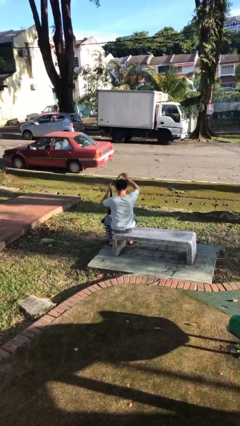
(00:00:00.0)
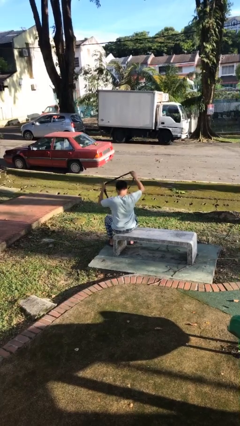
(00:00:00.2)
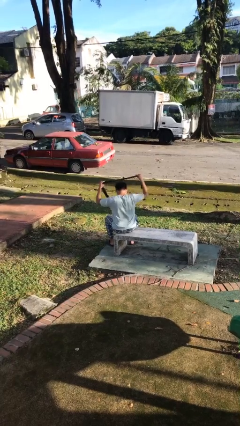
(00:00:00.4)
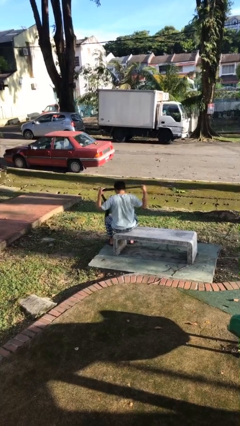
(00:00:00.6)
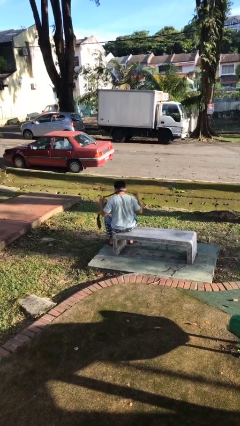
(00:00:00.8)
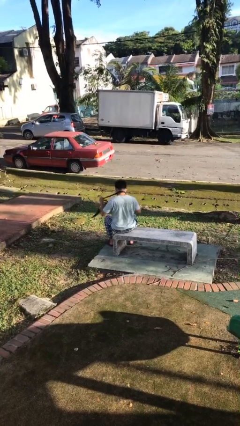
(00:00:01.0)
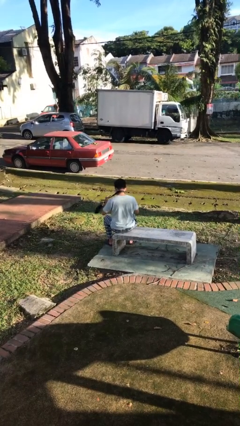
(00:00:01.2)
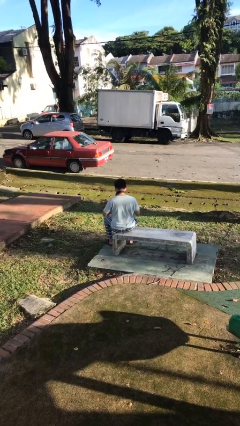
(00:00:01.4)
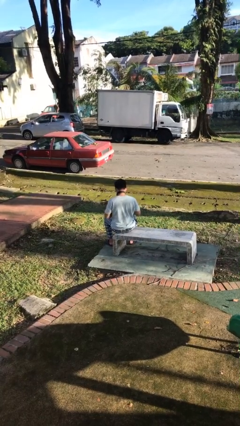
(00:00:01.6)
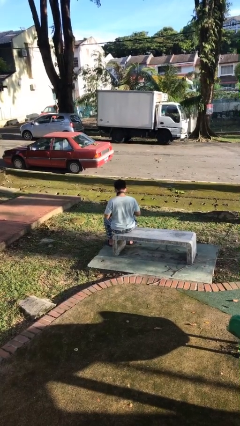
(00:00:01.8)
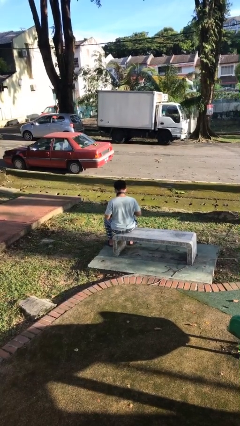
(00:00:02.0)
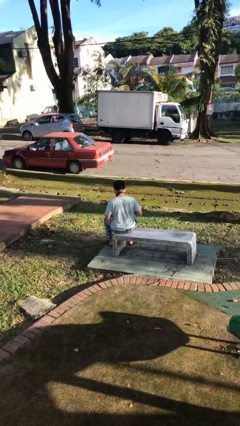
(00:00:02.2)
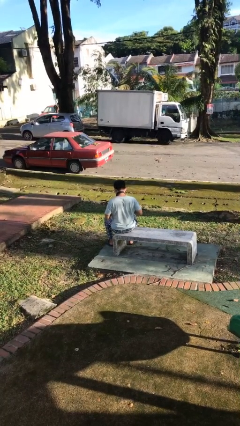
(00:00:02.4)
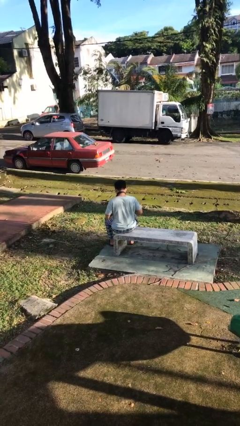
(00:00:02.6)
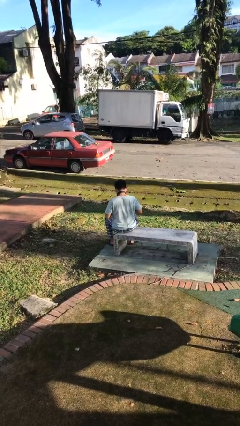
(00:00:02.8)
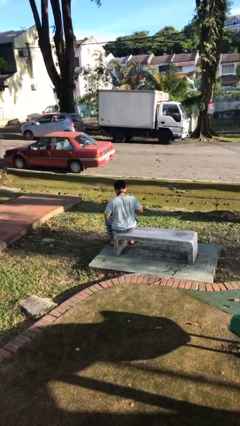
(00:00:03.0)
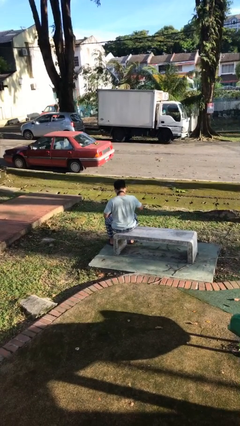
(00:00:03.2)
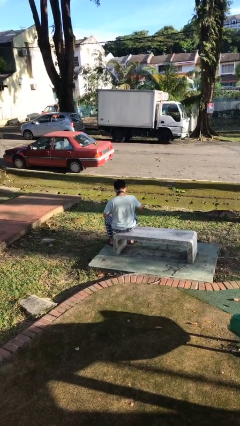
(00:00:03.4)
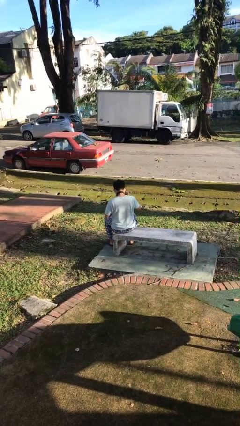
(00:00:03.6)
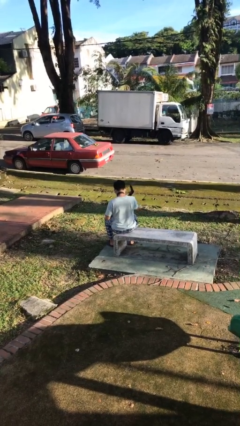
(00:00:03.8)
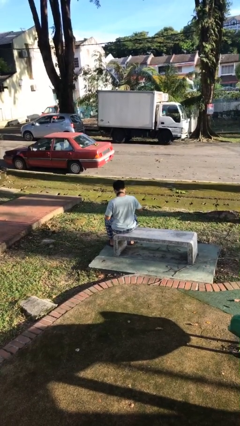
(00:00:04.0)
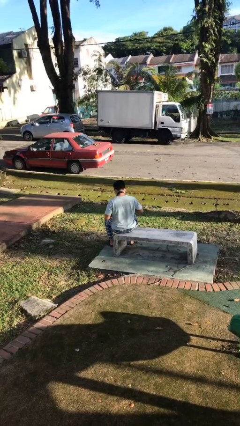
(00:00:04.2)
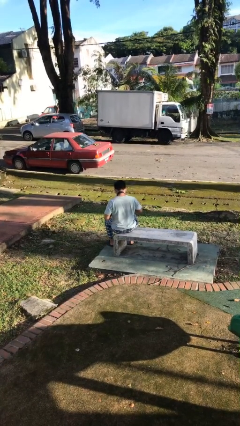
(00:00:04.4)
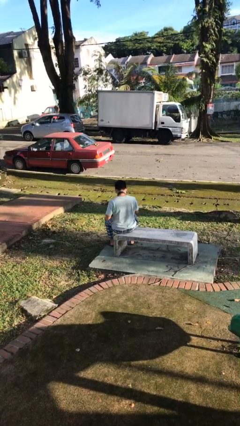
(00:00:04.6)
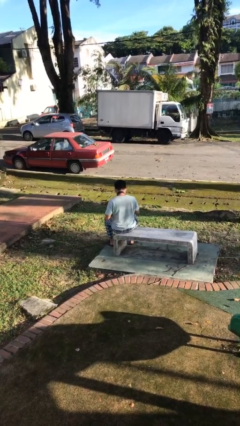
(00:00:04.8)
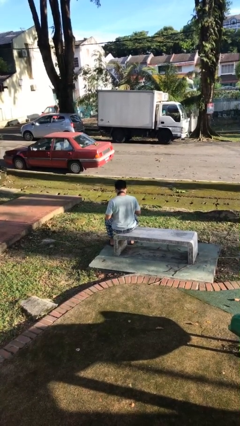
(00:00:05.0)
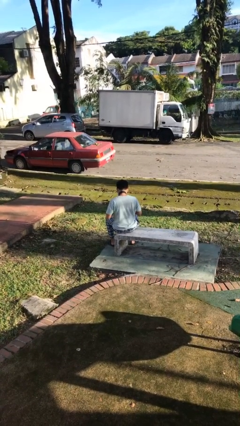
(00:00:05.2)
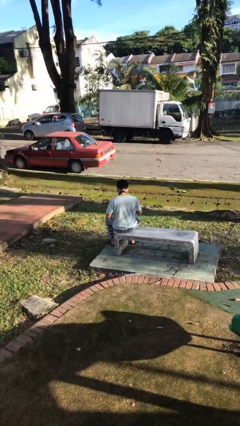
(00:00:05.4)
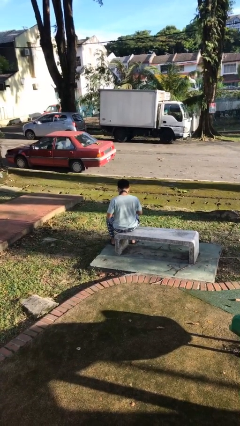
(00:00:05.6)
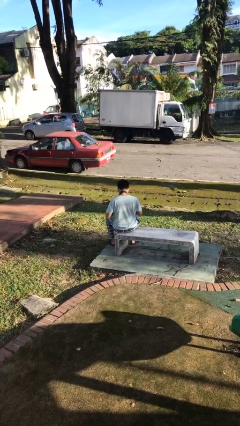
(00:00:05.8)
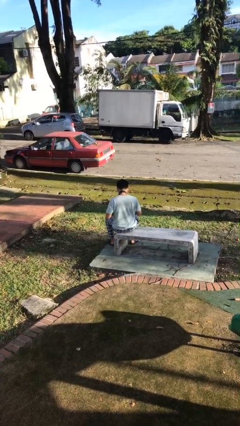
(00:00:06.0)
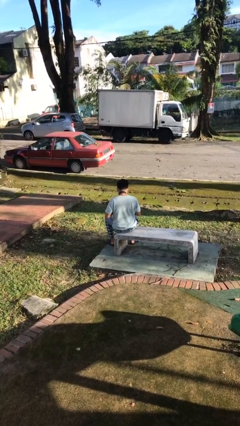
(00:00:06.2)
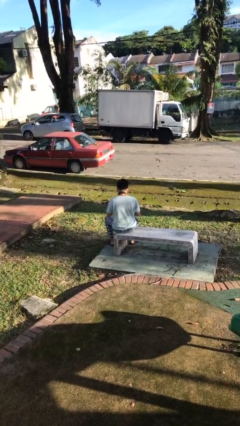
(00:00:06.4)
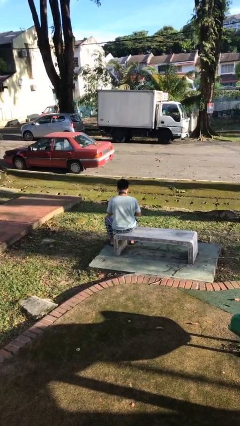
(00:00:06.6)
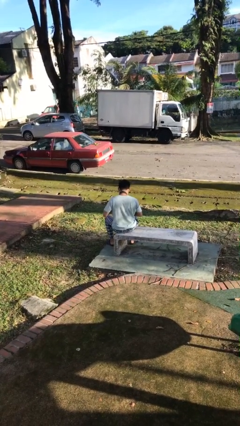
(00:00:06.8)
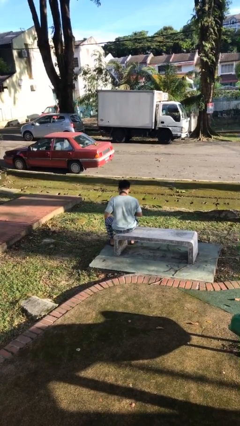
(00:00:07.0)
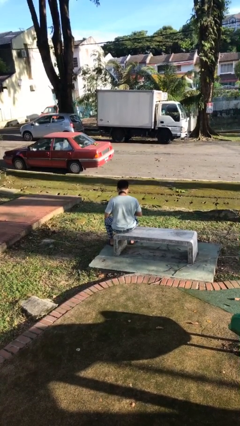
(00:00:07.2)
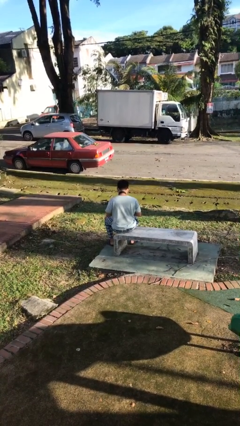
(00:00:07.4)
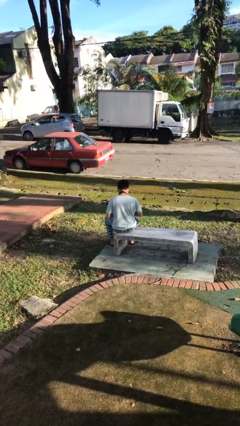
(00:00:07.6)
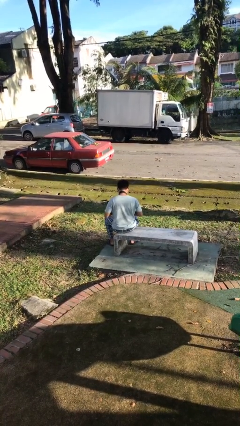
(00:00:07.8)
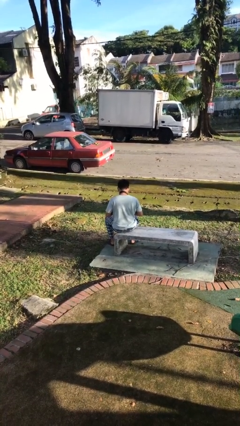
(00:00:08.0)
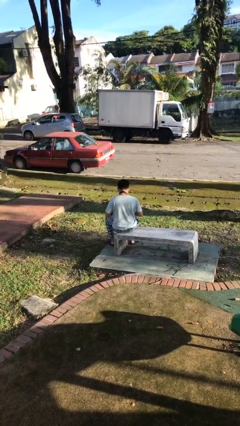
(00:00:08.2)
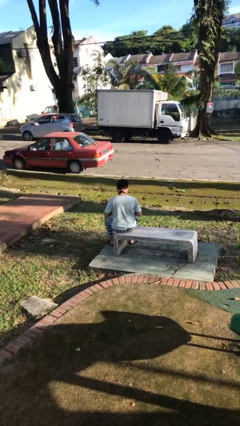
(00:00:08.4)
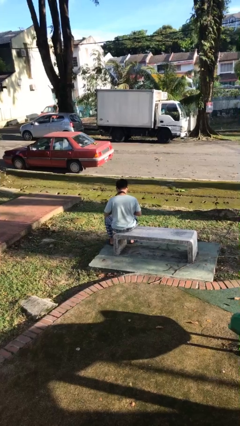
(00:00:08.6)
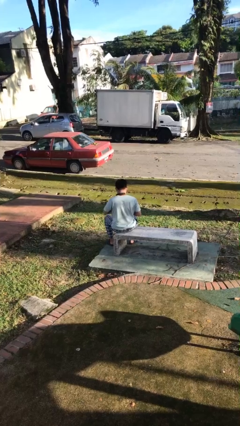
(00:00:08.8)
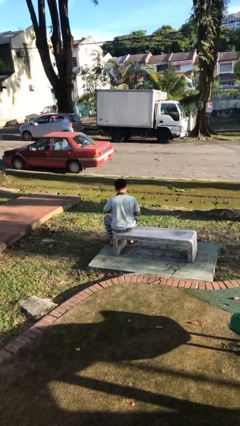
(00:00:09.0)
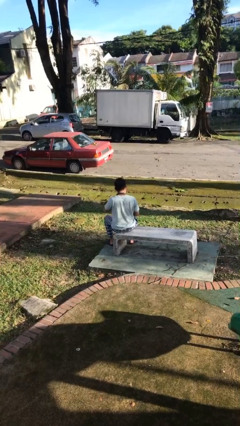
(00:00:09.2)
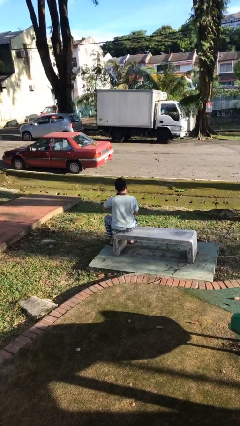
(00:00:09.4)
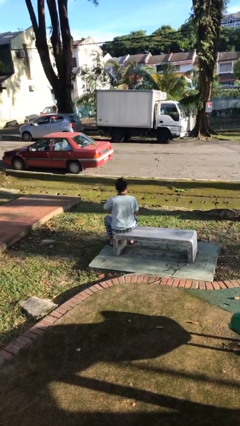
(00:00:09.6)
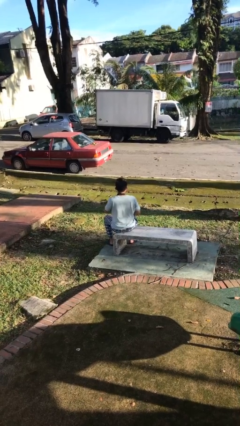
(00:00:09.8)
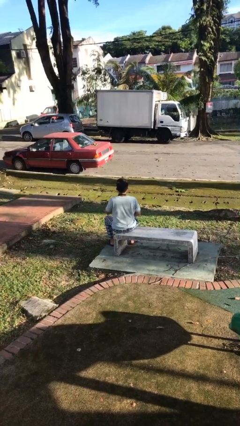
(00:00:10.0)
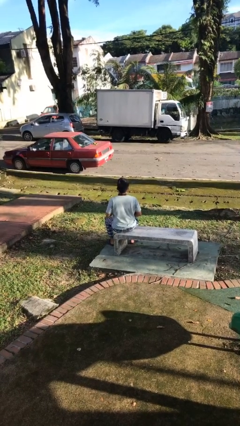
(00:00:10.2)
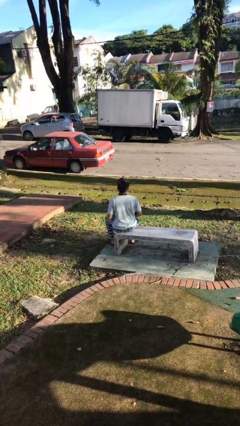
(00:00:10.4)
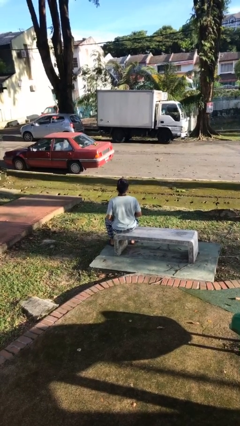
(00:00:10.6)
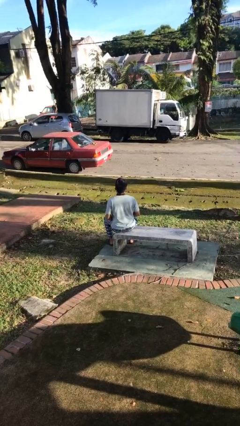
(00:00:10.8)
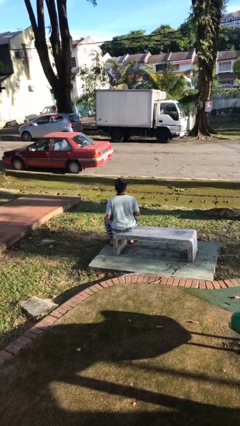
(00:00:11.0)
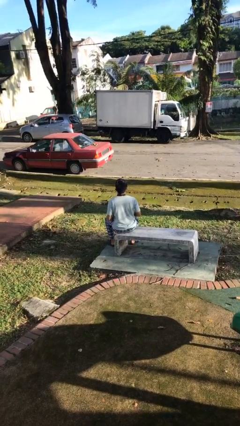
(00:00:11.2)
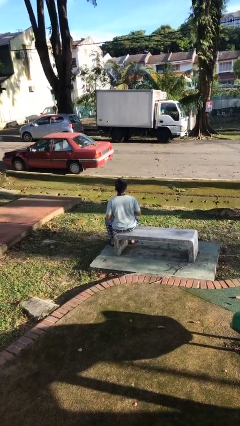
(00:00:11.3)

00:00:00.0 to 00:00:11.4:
person puts on necktie

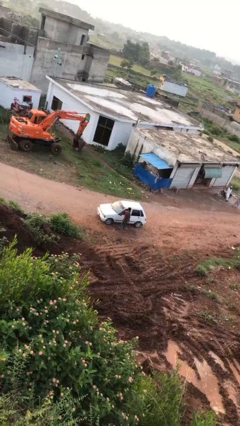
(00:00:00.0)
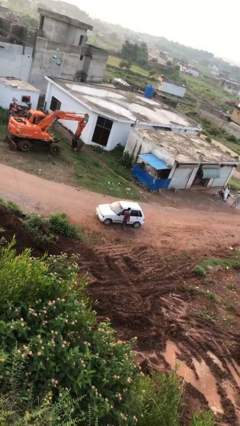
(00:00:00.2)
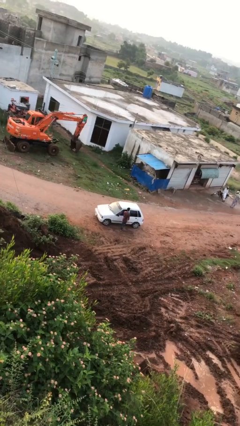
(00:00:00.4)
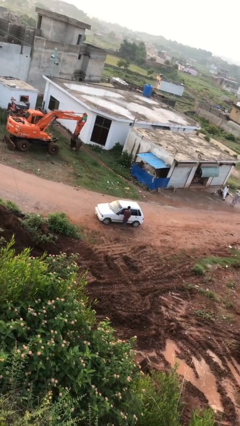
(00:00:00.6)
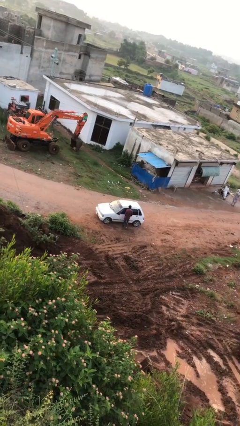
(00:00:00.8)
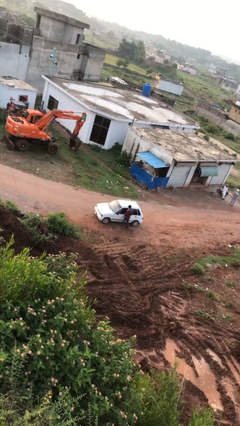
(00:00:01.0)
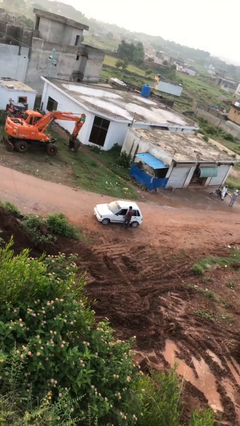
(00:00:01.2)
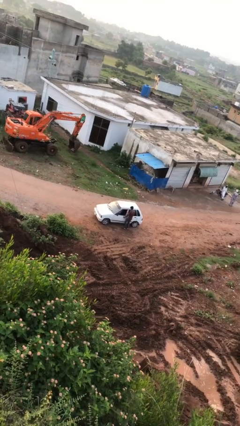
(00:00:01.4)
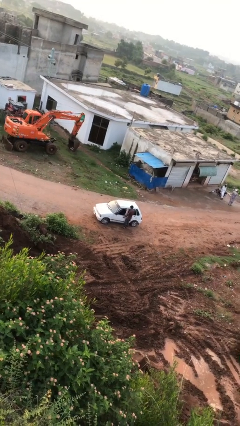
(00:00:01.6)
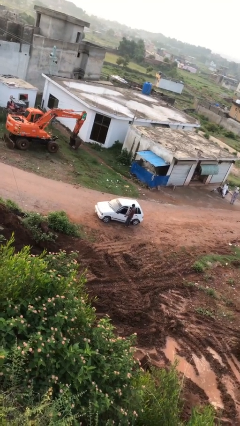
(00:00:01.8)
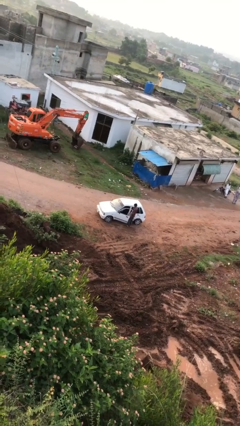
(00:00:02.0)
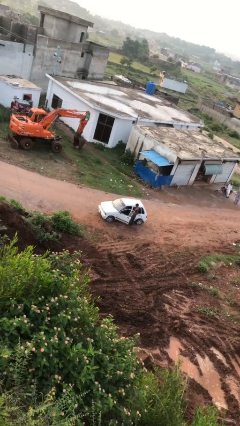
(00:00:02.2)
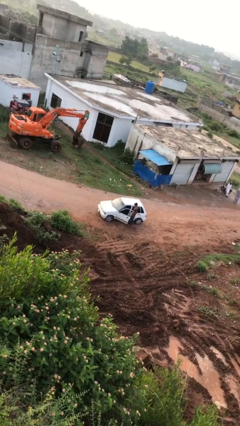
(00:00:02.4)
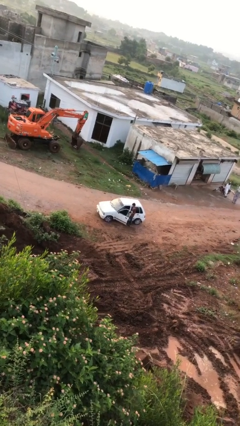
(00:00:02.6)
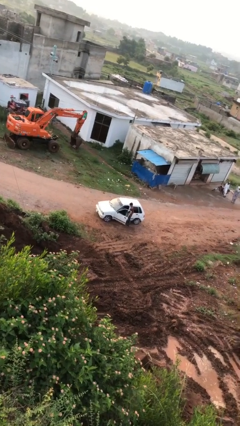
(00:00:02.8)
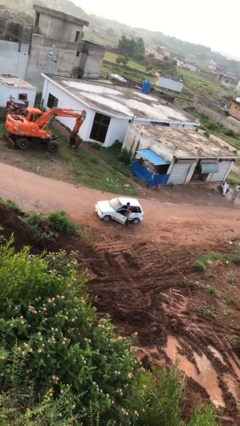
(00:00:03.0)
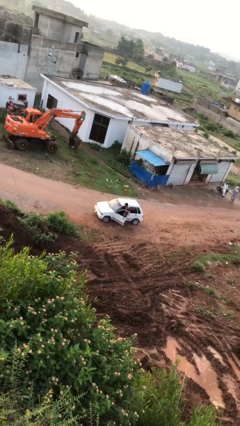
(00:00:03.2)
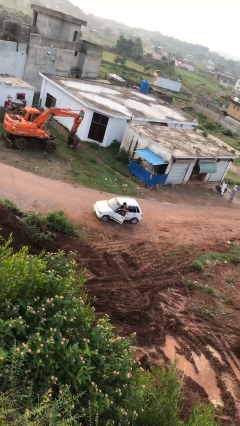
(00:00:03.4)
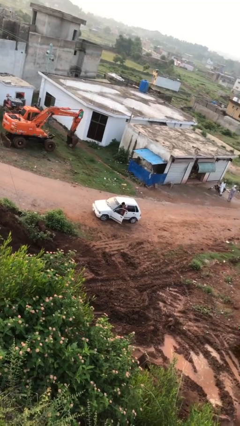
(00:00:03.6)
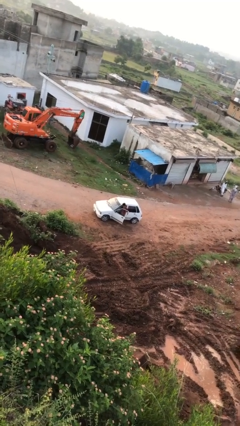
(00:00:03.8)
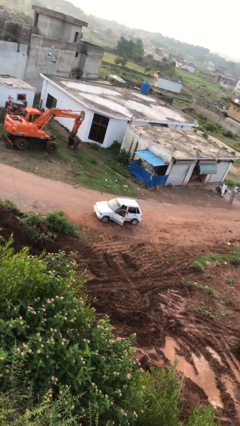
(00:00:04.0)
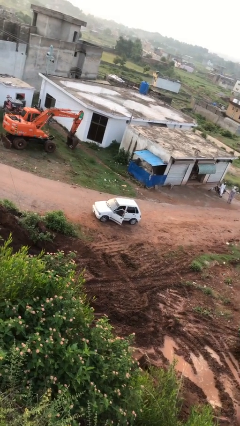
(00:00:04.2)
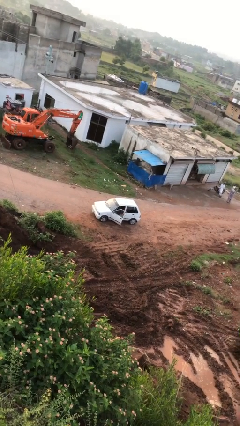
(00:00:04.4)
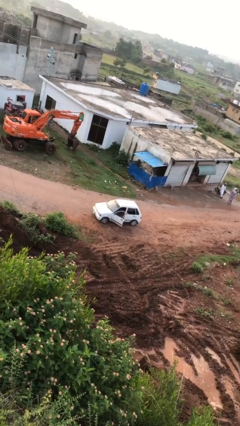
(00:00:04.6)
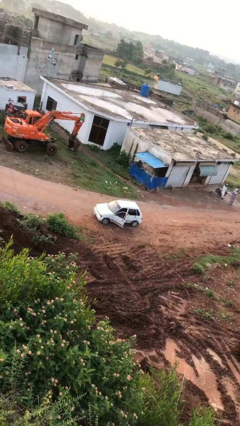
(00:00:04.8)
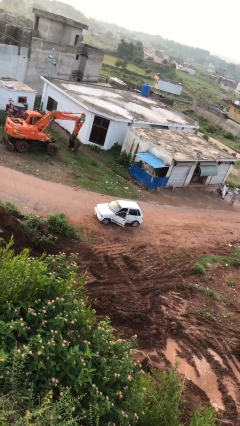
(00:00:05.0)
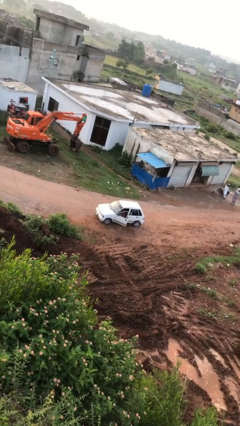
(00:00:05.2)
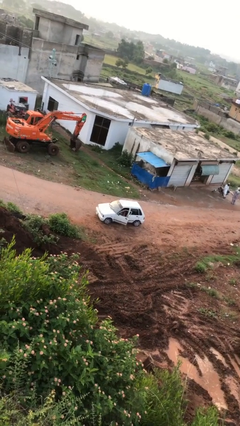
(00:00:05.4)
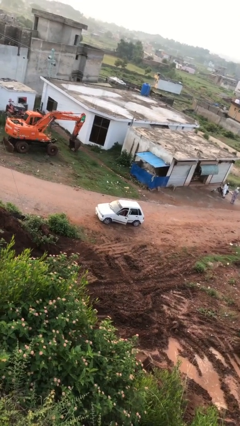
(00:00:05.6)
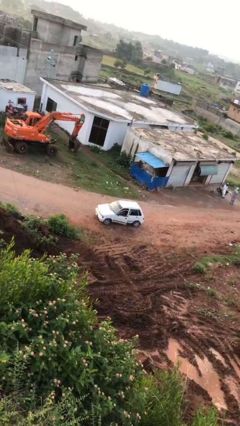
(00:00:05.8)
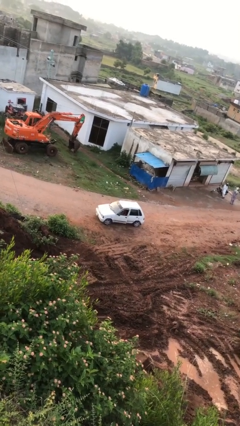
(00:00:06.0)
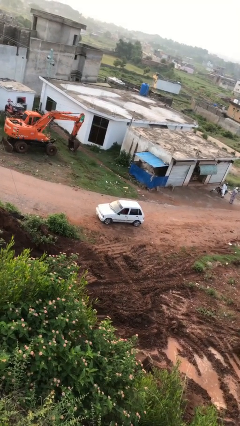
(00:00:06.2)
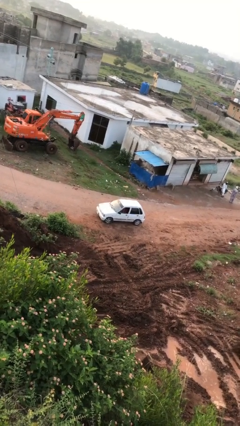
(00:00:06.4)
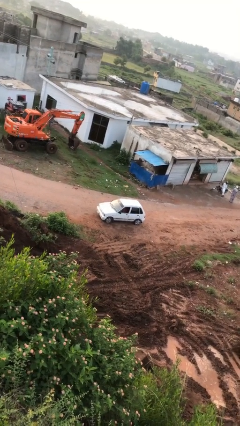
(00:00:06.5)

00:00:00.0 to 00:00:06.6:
car picks up person
